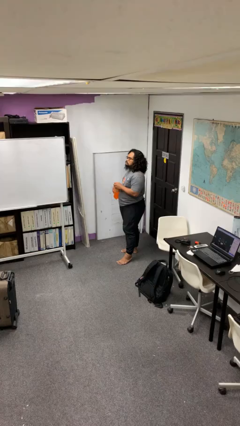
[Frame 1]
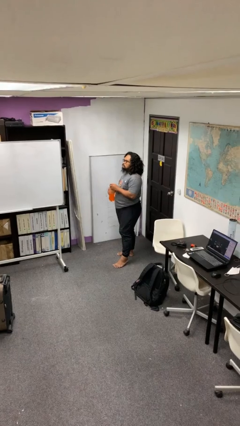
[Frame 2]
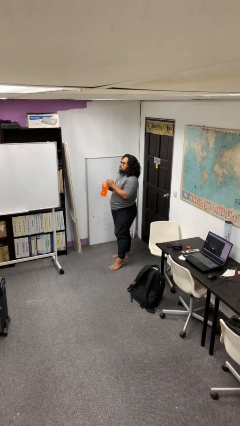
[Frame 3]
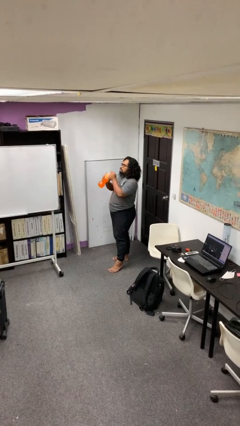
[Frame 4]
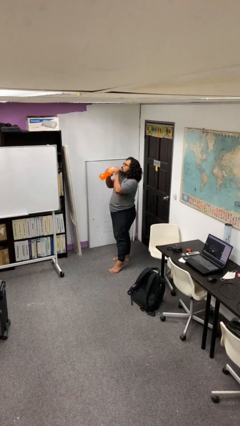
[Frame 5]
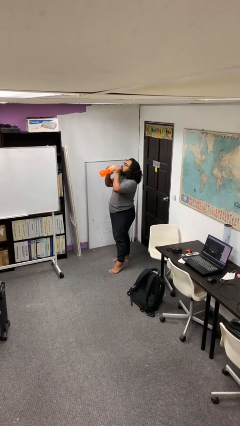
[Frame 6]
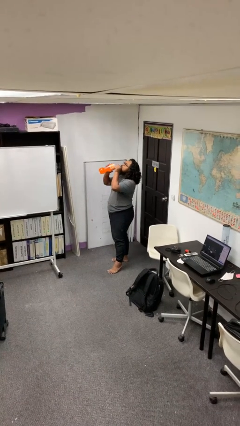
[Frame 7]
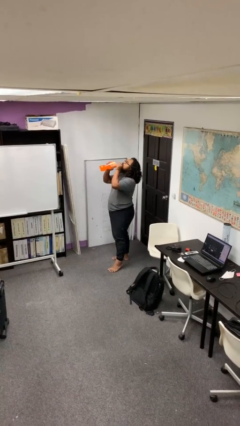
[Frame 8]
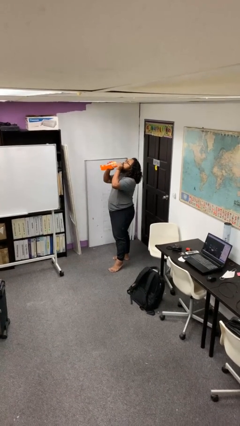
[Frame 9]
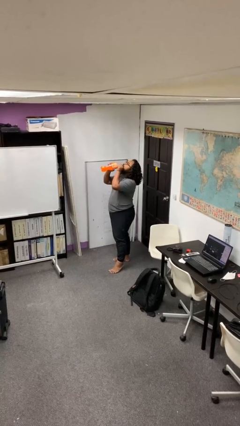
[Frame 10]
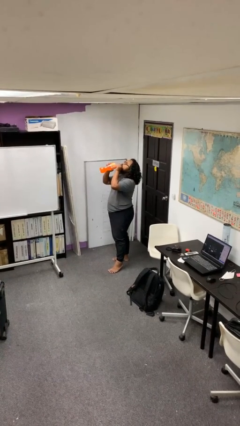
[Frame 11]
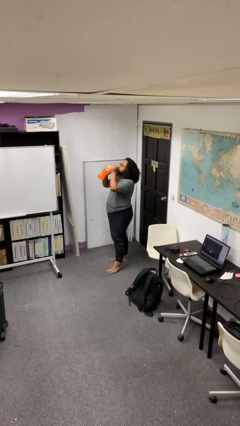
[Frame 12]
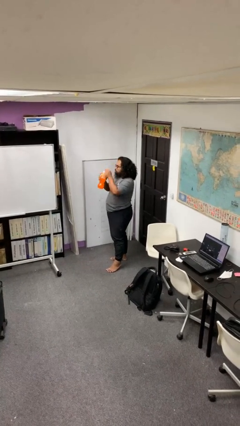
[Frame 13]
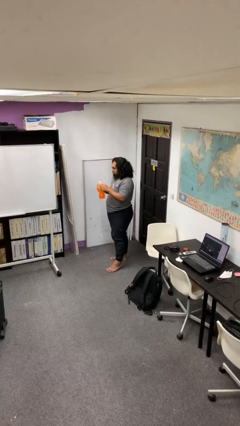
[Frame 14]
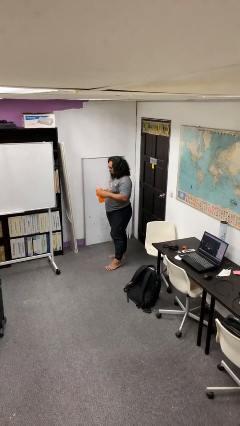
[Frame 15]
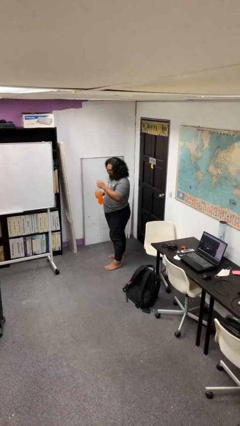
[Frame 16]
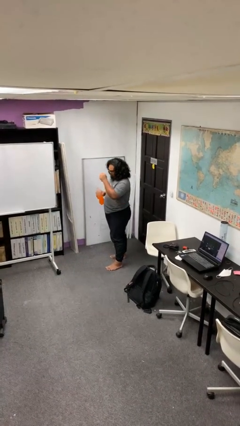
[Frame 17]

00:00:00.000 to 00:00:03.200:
person drinks from bottle

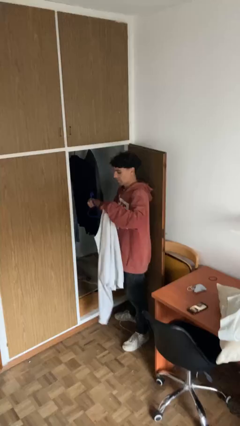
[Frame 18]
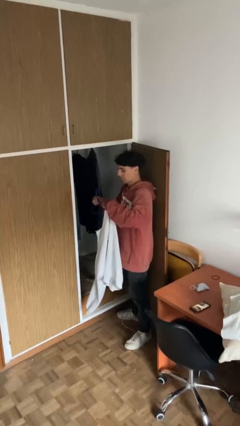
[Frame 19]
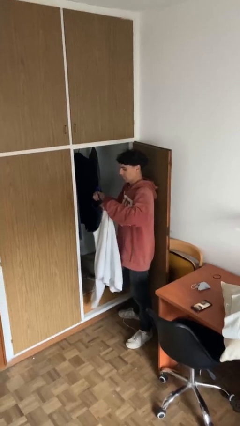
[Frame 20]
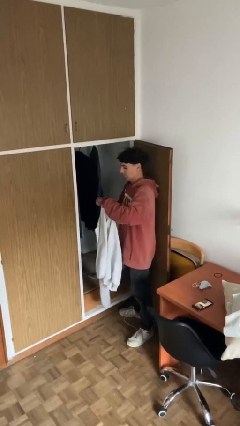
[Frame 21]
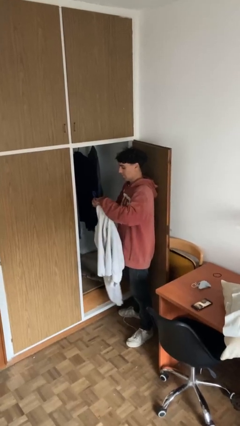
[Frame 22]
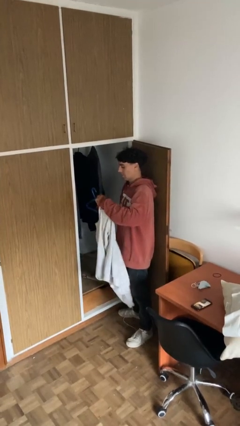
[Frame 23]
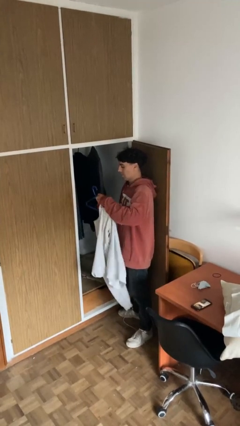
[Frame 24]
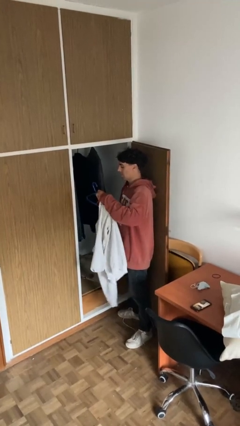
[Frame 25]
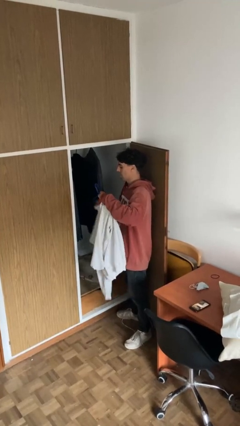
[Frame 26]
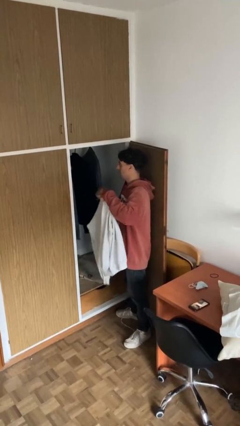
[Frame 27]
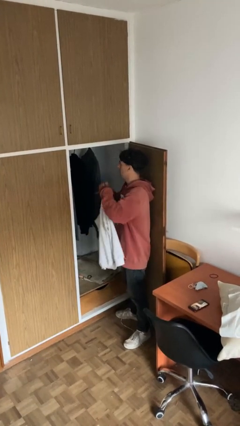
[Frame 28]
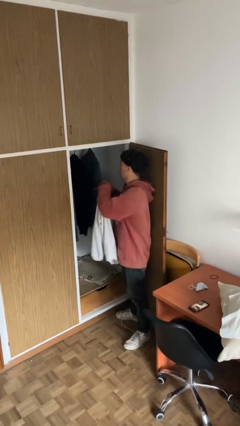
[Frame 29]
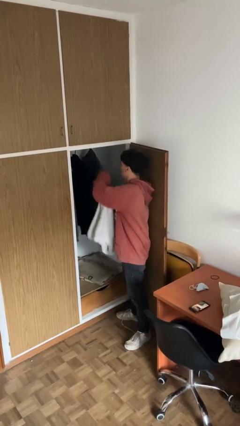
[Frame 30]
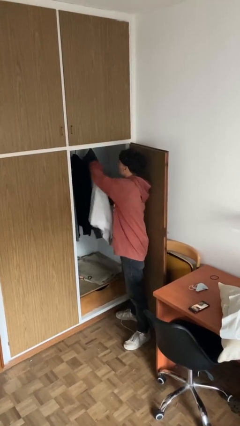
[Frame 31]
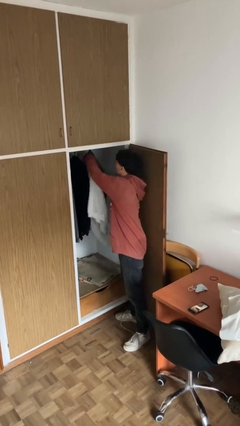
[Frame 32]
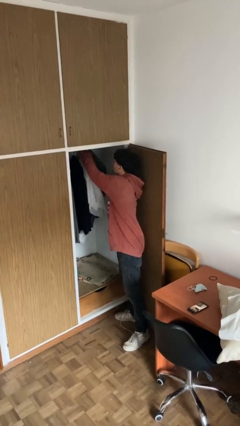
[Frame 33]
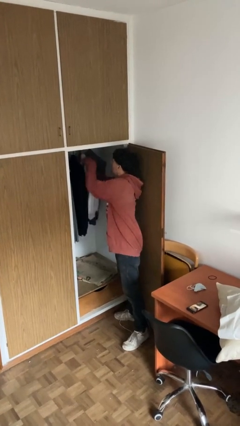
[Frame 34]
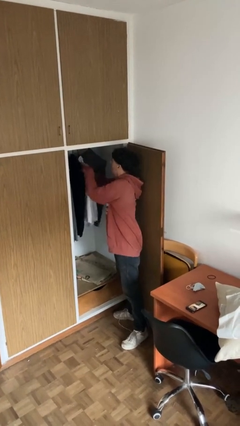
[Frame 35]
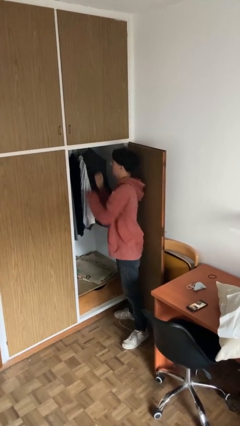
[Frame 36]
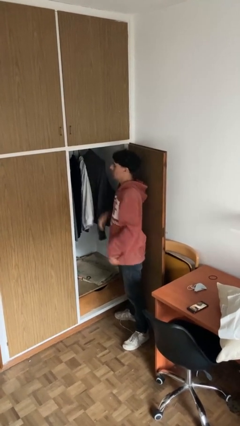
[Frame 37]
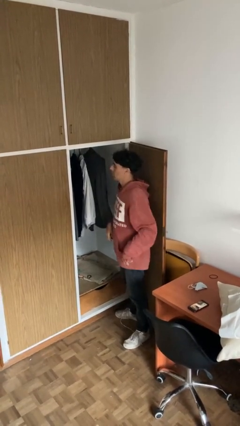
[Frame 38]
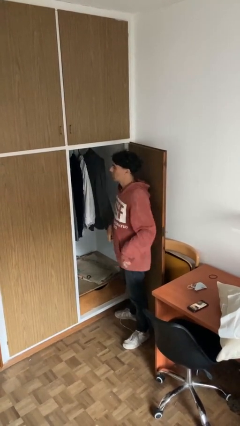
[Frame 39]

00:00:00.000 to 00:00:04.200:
person puts clothes into closet

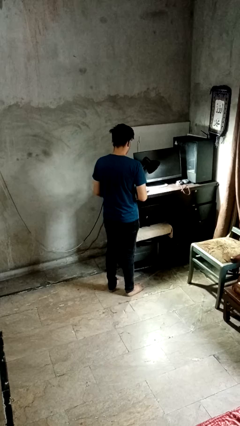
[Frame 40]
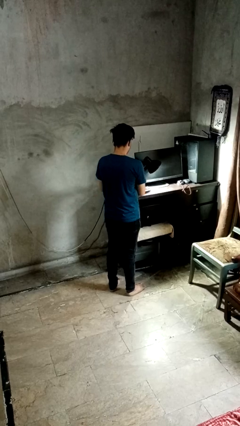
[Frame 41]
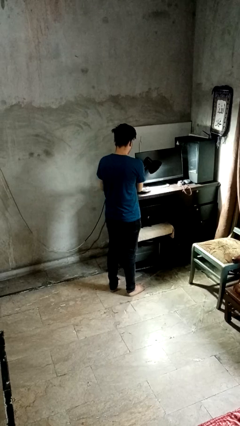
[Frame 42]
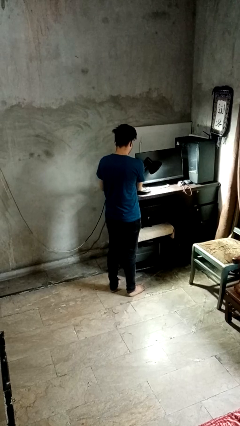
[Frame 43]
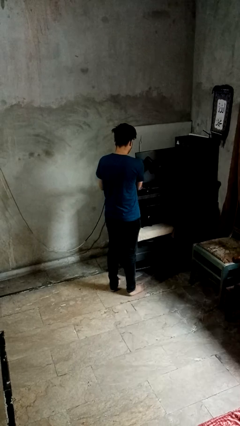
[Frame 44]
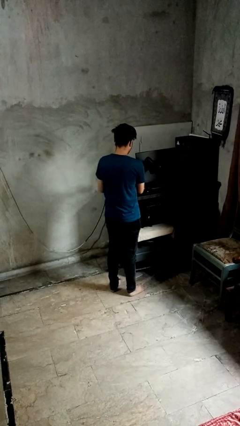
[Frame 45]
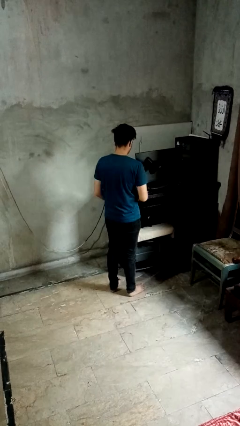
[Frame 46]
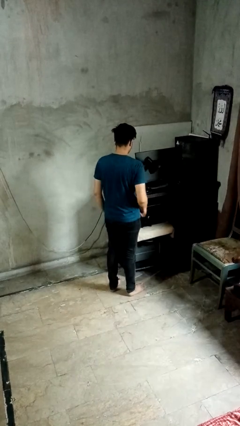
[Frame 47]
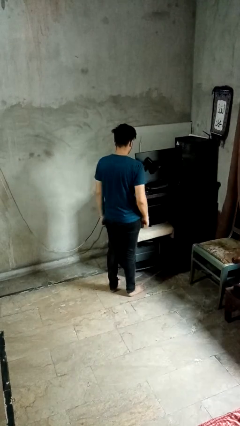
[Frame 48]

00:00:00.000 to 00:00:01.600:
person turns off lamp

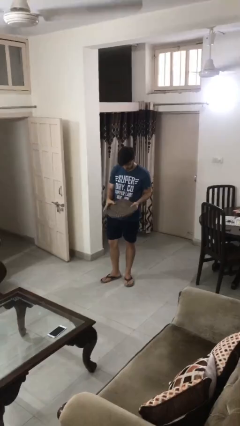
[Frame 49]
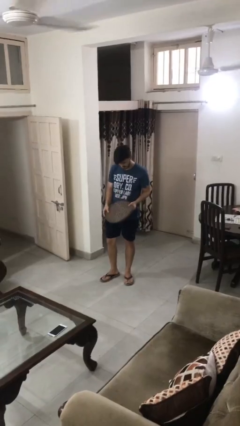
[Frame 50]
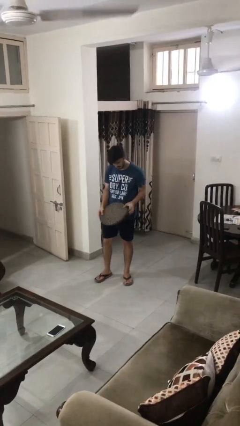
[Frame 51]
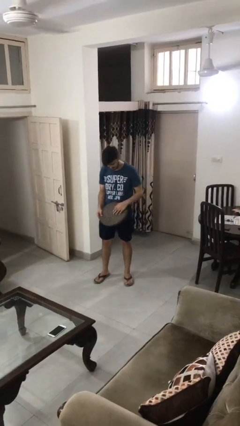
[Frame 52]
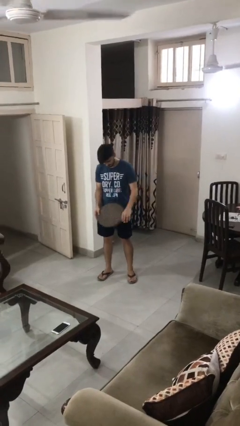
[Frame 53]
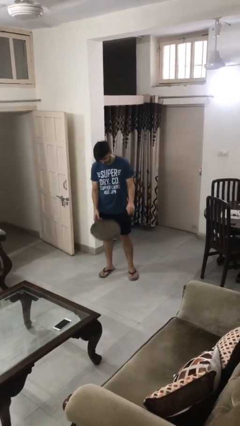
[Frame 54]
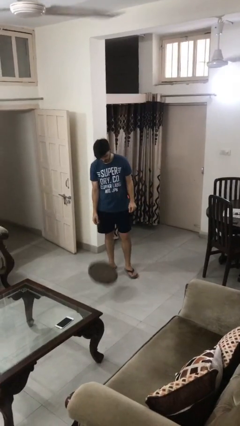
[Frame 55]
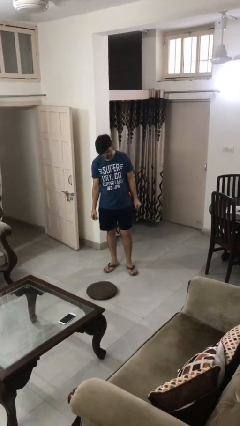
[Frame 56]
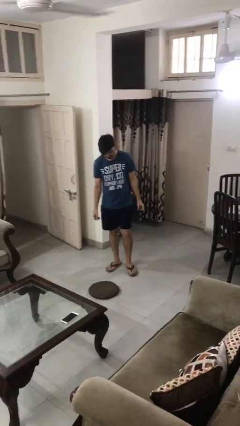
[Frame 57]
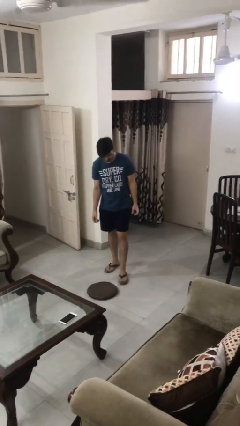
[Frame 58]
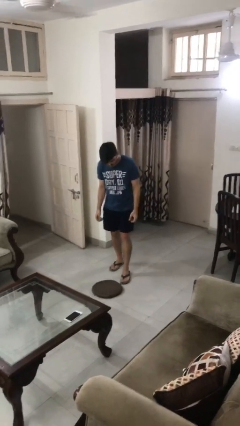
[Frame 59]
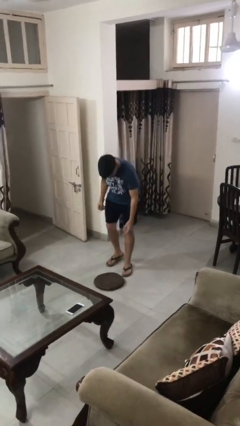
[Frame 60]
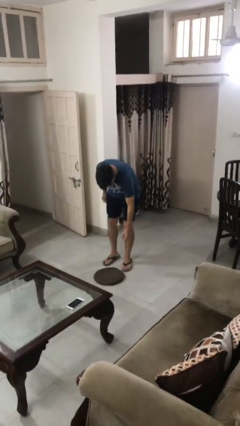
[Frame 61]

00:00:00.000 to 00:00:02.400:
person drops object

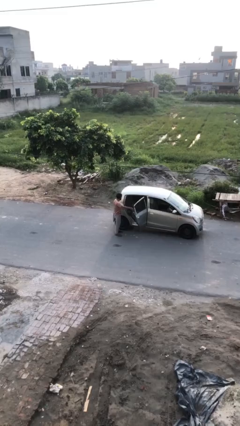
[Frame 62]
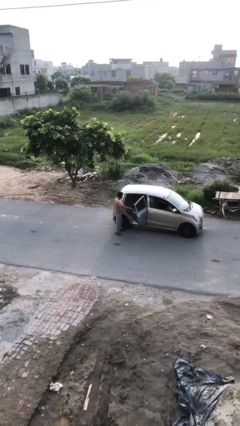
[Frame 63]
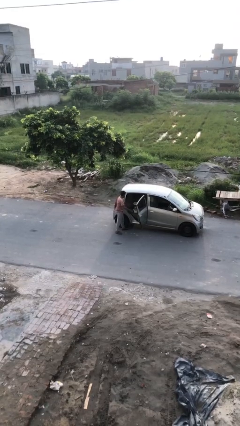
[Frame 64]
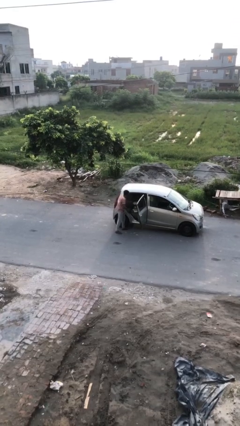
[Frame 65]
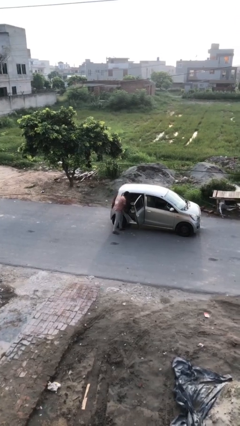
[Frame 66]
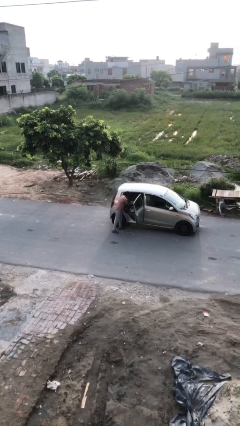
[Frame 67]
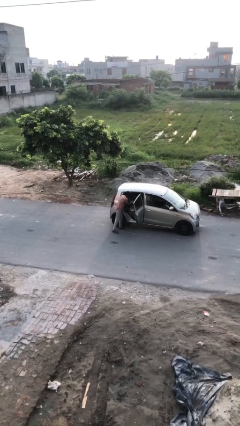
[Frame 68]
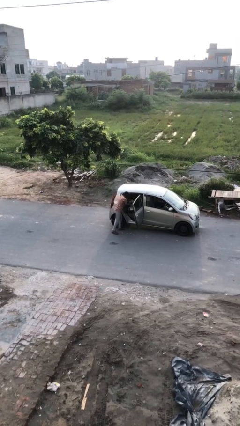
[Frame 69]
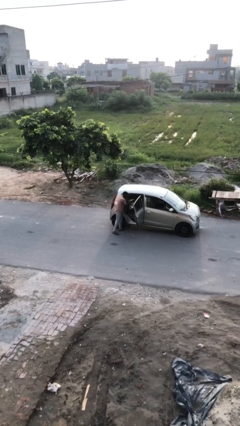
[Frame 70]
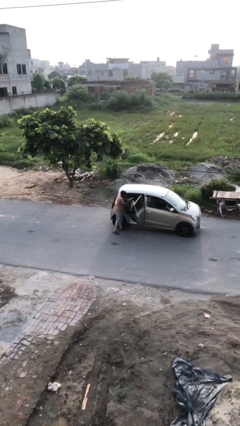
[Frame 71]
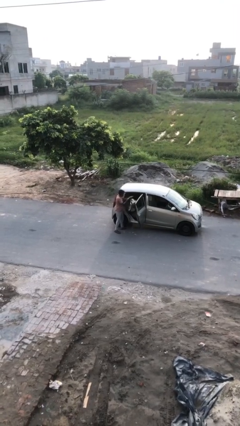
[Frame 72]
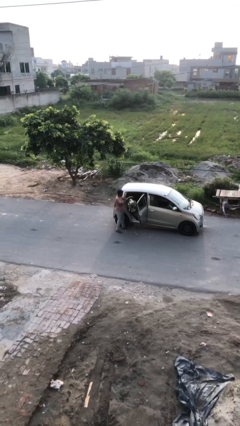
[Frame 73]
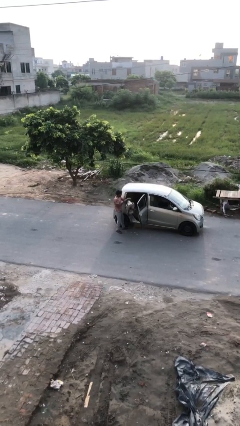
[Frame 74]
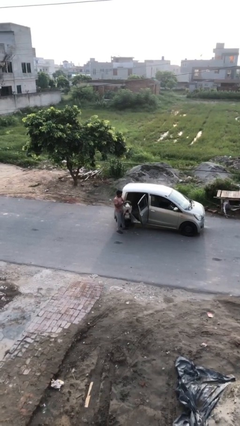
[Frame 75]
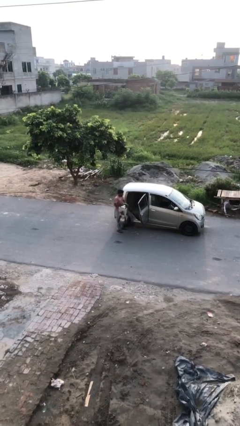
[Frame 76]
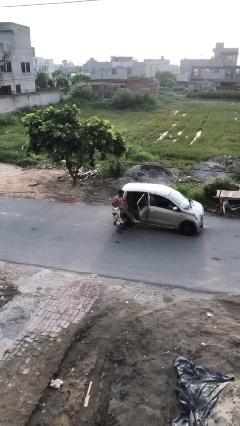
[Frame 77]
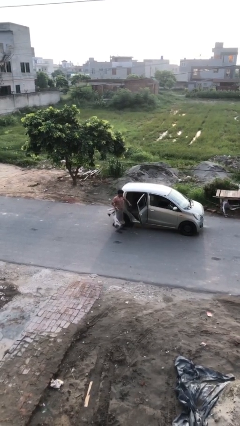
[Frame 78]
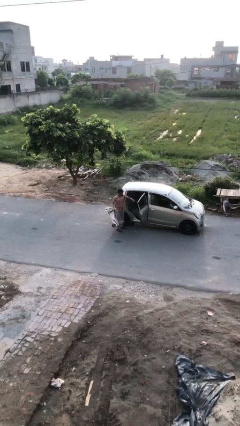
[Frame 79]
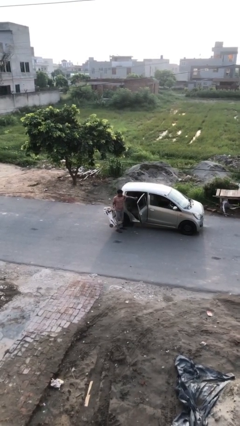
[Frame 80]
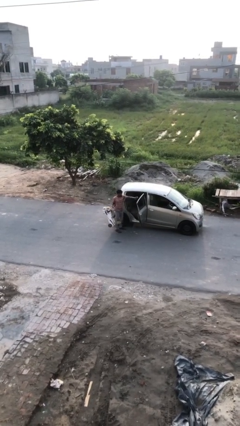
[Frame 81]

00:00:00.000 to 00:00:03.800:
person unloads car

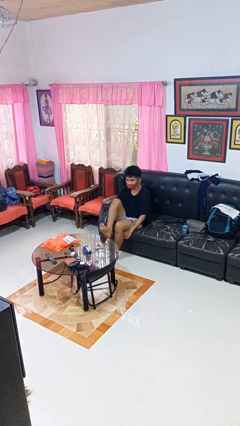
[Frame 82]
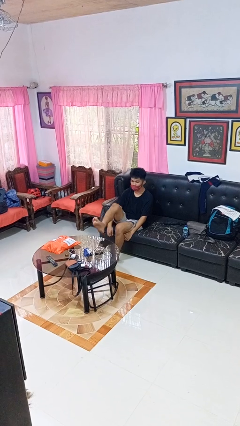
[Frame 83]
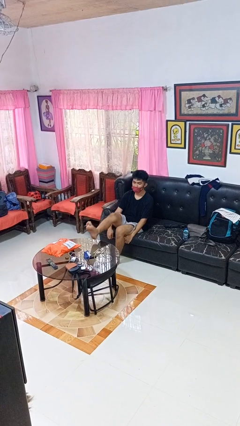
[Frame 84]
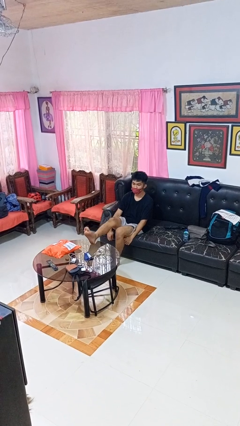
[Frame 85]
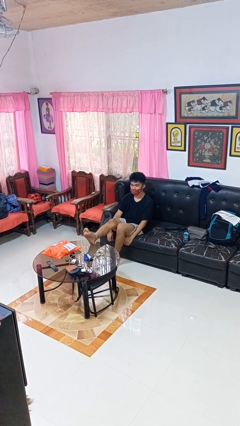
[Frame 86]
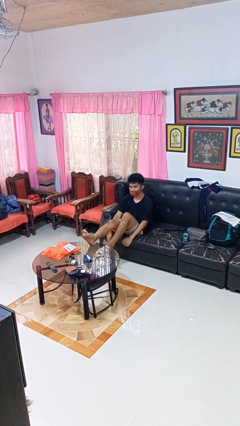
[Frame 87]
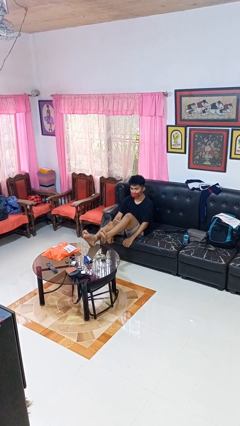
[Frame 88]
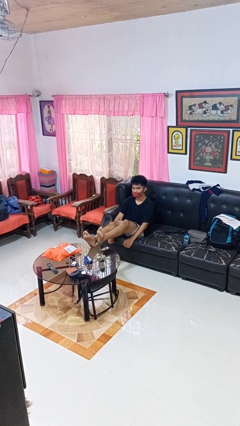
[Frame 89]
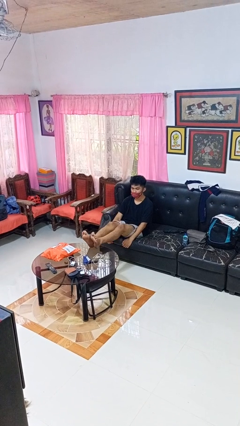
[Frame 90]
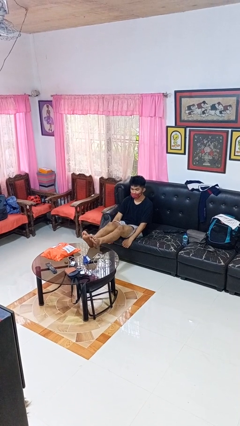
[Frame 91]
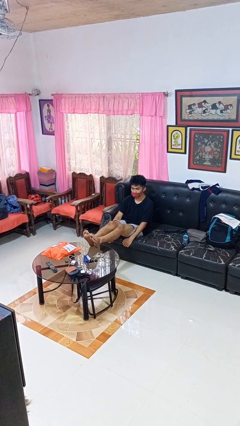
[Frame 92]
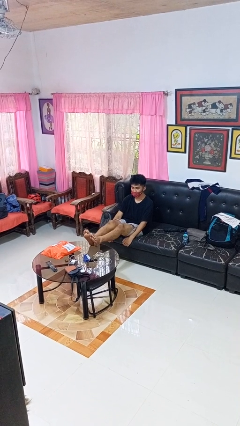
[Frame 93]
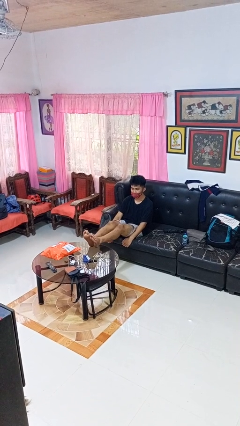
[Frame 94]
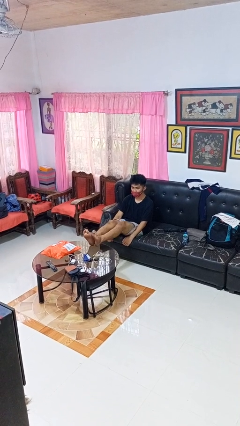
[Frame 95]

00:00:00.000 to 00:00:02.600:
person puts feet up
